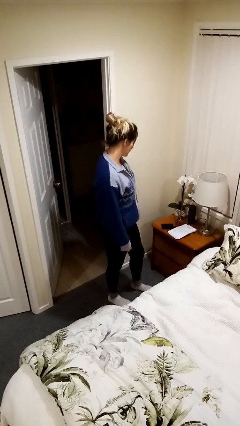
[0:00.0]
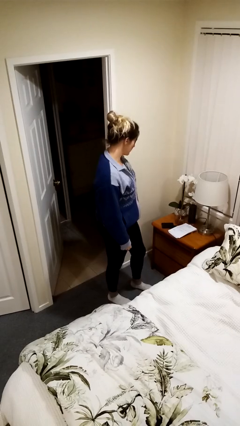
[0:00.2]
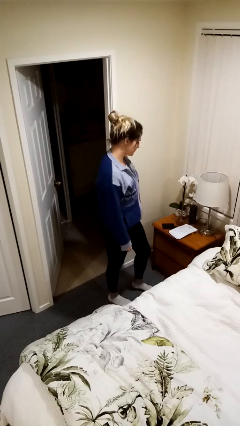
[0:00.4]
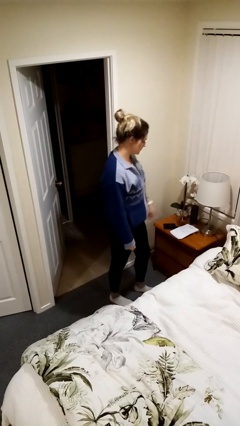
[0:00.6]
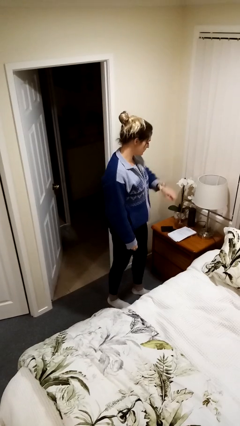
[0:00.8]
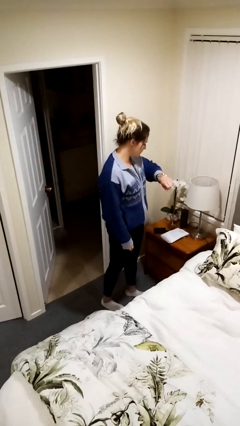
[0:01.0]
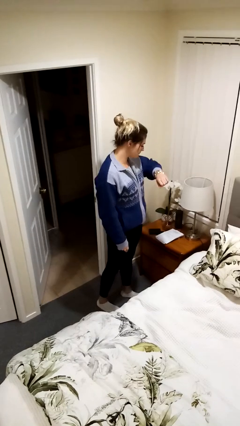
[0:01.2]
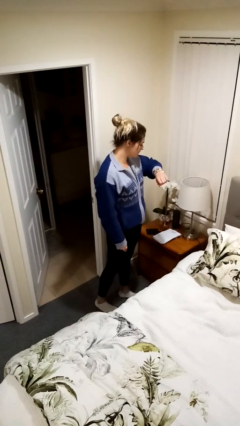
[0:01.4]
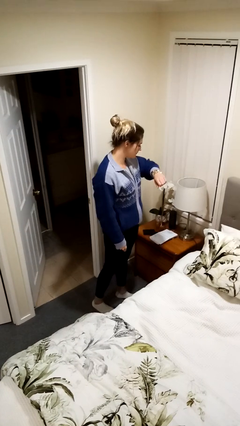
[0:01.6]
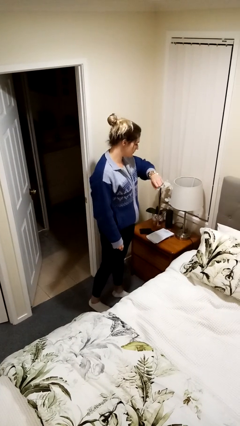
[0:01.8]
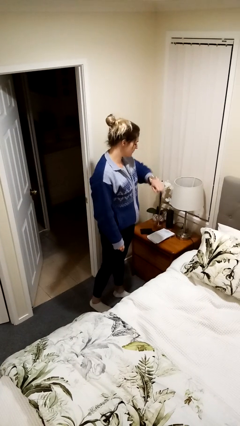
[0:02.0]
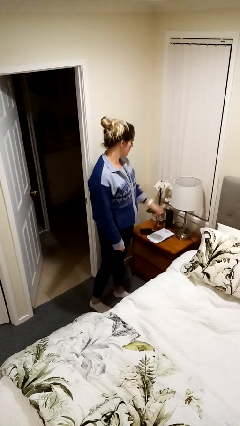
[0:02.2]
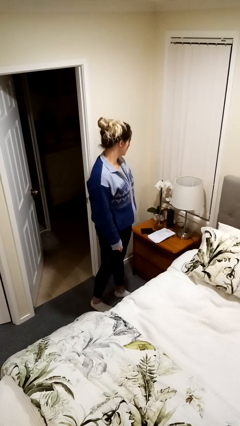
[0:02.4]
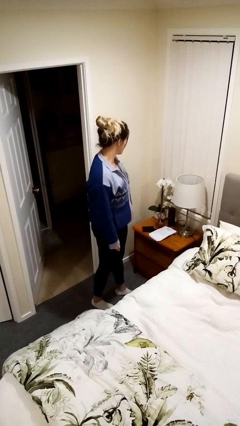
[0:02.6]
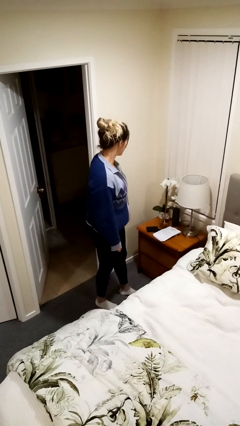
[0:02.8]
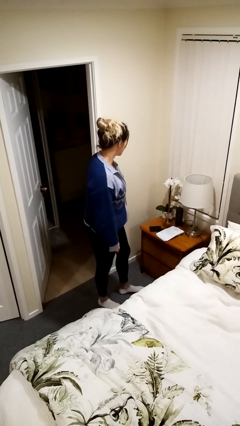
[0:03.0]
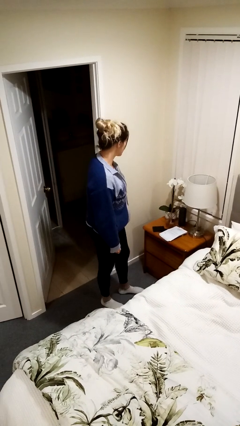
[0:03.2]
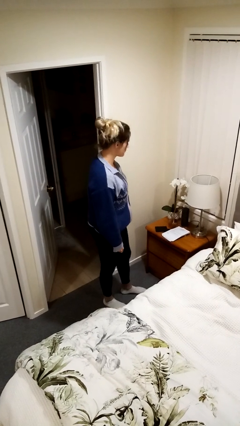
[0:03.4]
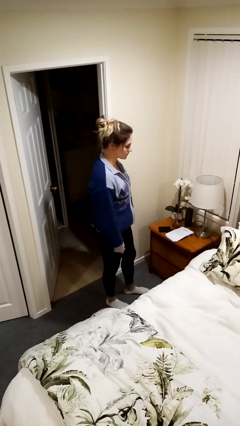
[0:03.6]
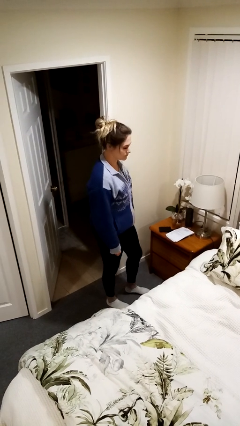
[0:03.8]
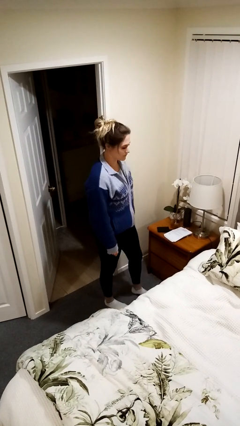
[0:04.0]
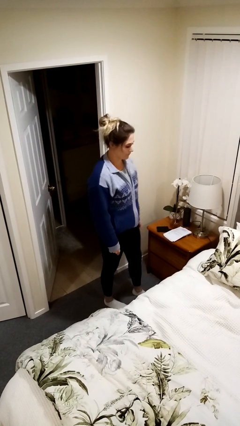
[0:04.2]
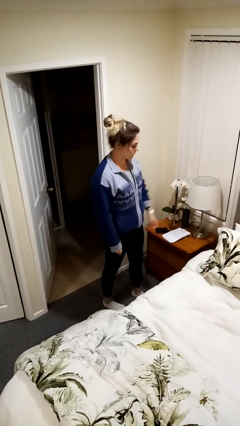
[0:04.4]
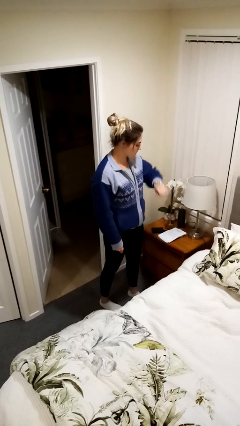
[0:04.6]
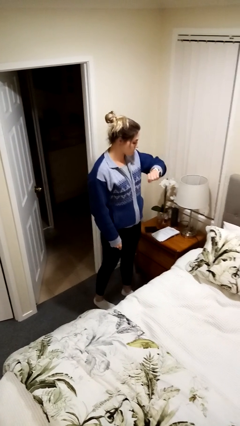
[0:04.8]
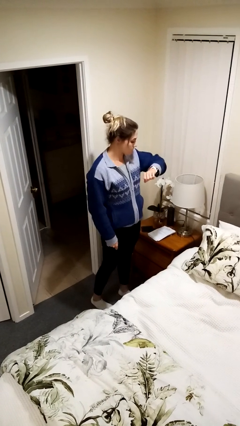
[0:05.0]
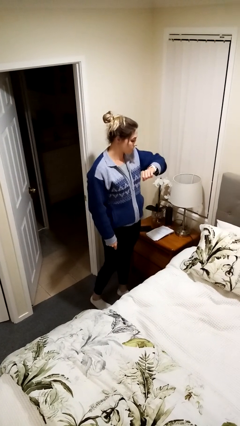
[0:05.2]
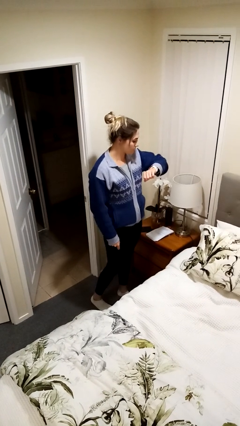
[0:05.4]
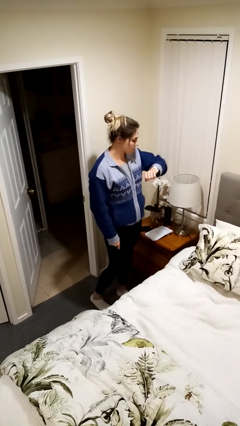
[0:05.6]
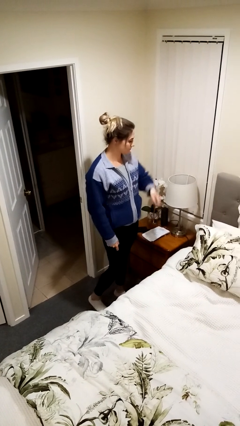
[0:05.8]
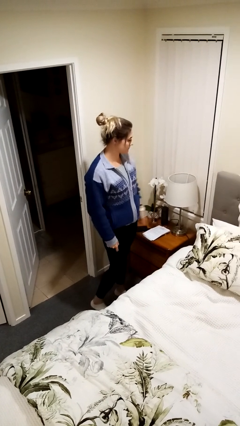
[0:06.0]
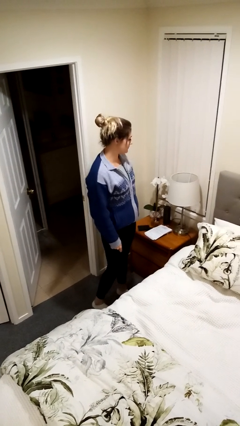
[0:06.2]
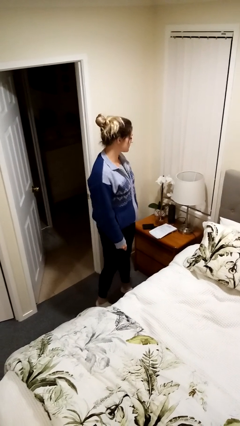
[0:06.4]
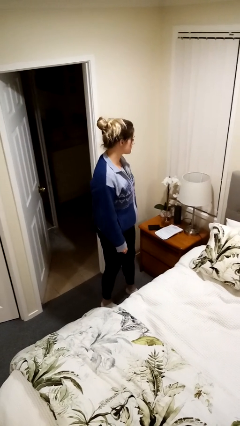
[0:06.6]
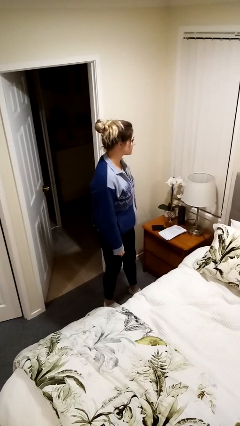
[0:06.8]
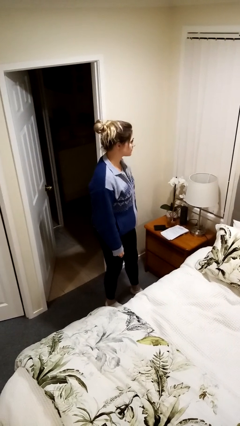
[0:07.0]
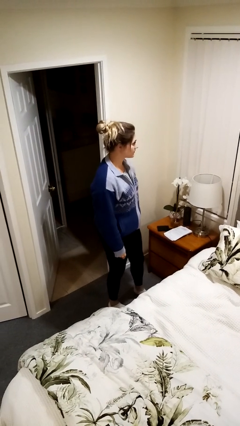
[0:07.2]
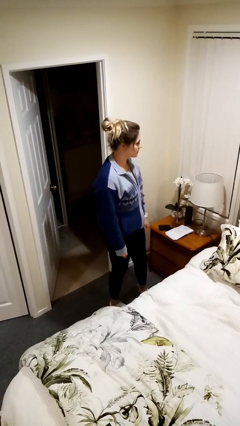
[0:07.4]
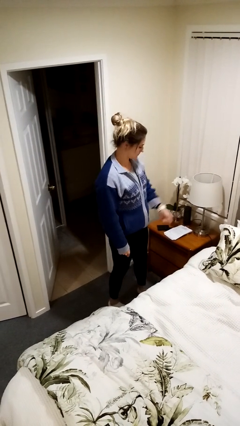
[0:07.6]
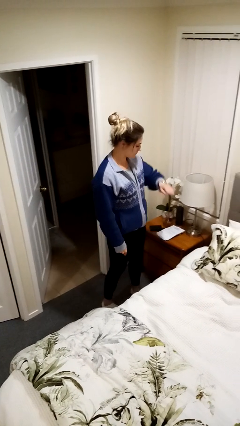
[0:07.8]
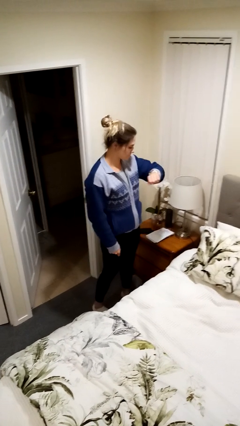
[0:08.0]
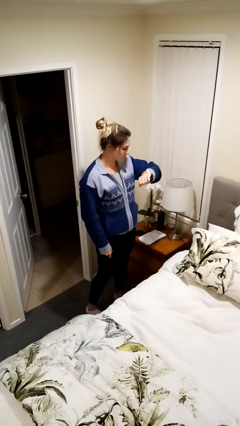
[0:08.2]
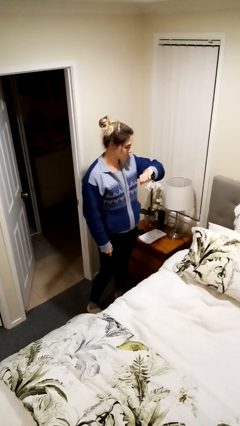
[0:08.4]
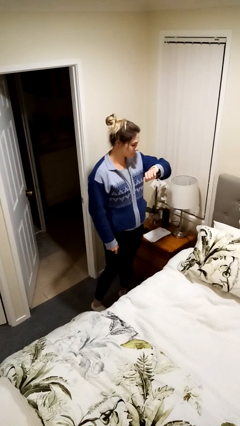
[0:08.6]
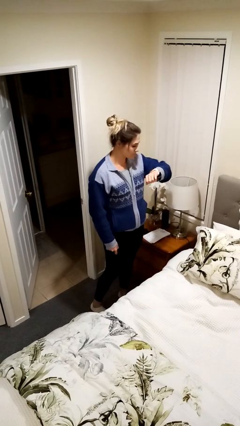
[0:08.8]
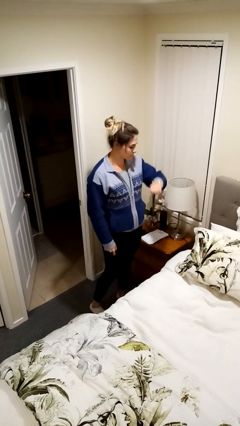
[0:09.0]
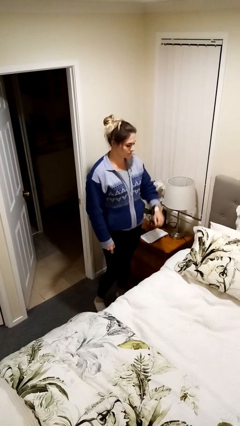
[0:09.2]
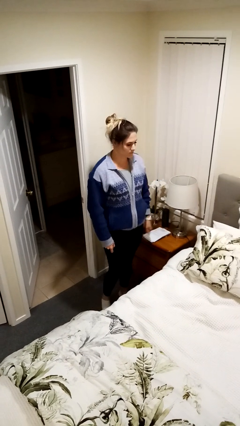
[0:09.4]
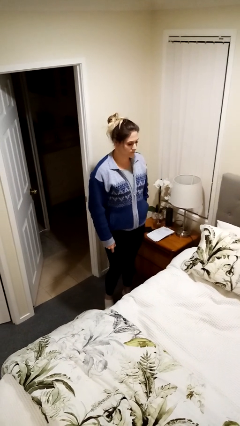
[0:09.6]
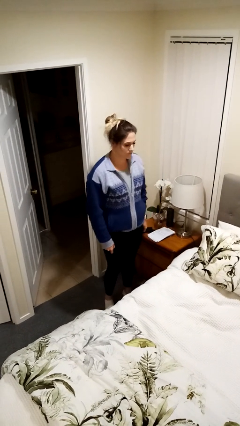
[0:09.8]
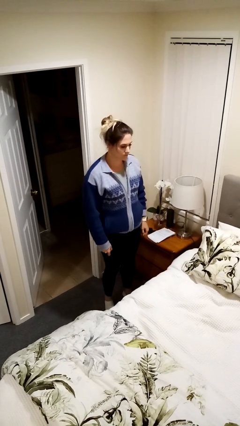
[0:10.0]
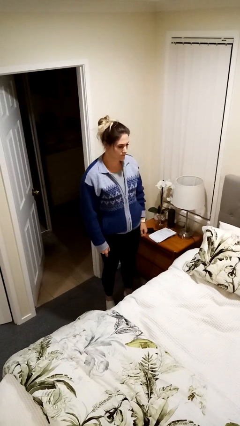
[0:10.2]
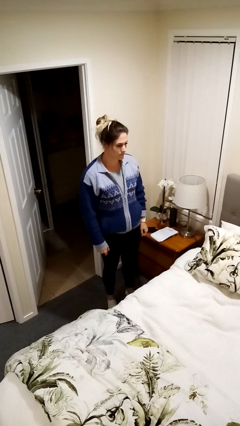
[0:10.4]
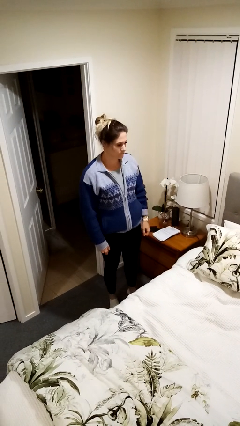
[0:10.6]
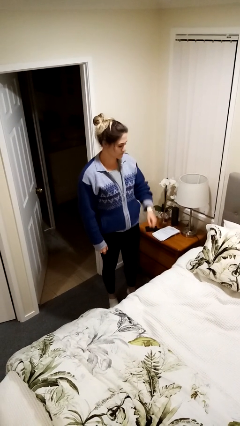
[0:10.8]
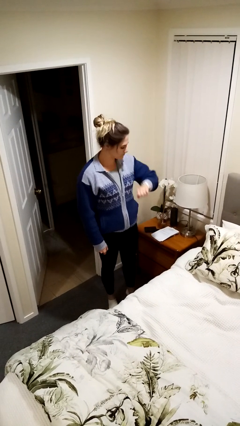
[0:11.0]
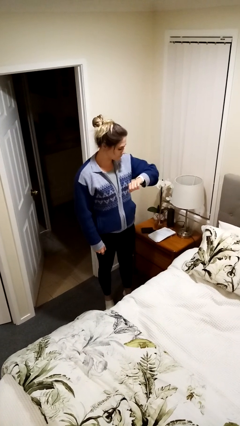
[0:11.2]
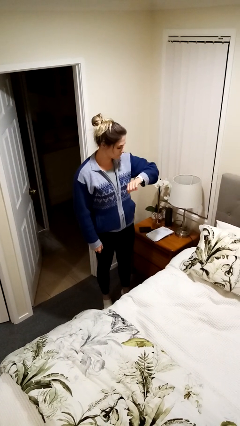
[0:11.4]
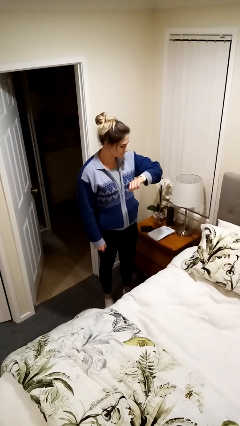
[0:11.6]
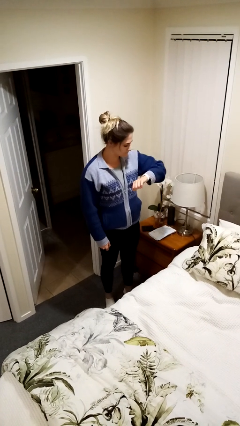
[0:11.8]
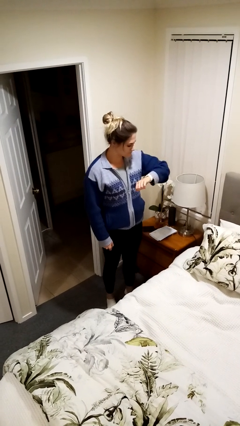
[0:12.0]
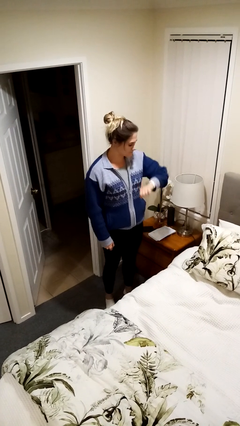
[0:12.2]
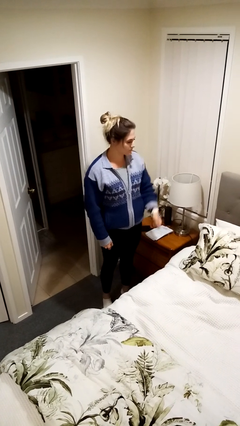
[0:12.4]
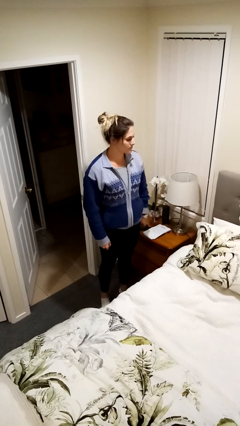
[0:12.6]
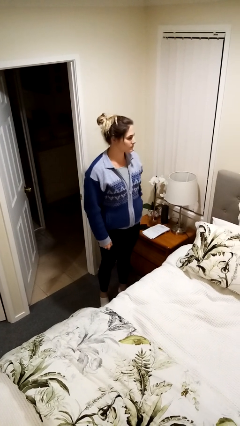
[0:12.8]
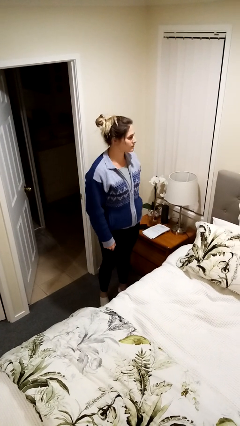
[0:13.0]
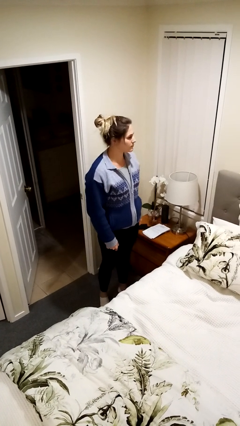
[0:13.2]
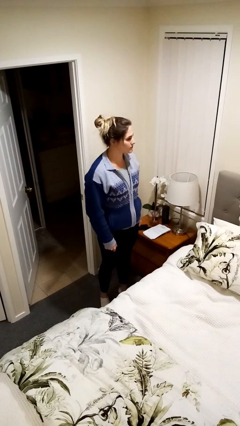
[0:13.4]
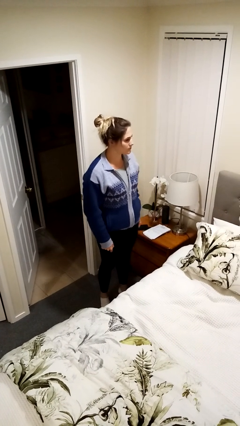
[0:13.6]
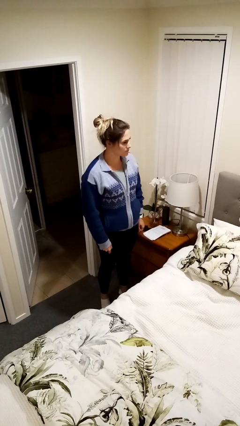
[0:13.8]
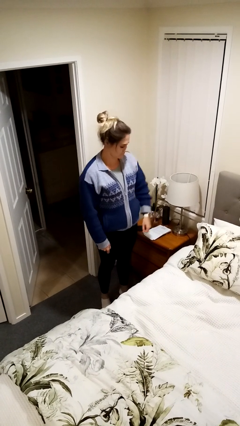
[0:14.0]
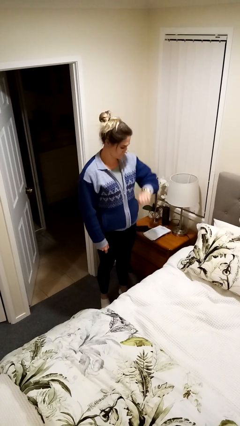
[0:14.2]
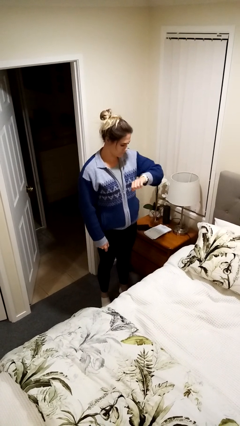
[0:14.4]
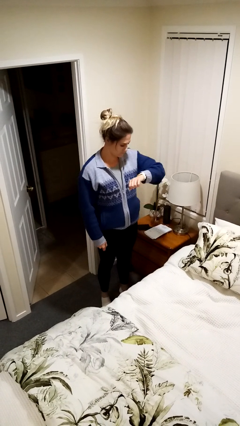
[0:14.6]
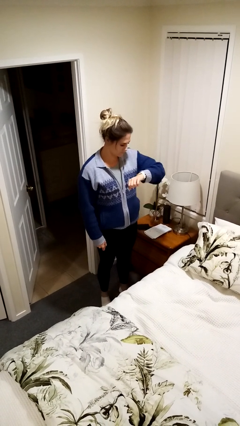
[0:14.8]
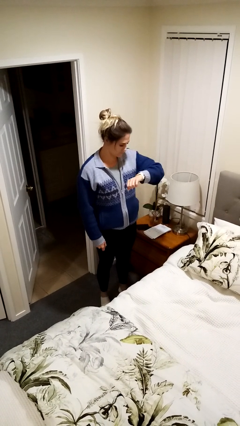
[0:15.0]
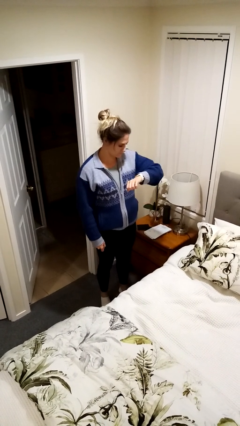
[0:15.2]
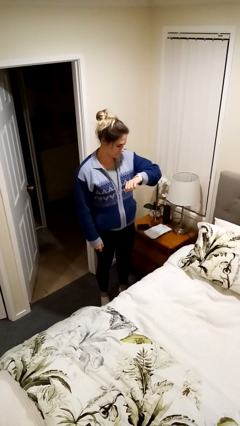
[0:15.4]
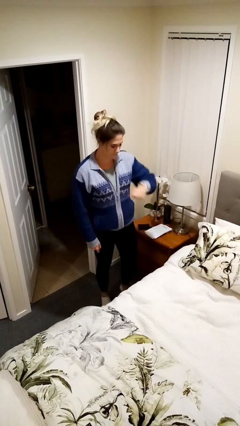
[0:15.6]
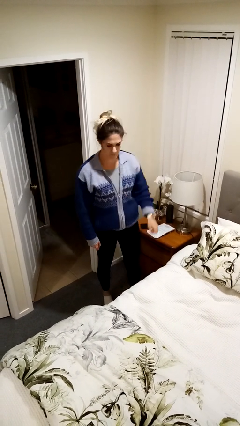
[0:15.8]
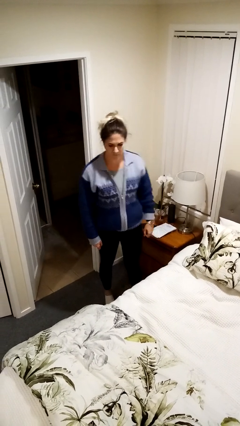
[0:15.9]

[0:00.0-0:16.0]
person looks at wristwatch

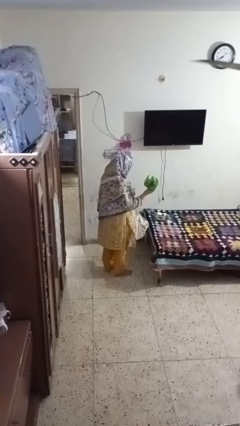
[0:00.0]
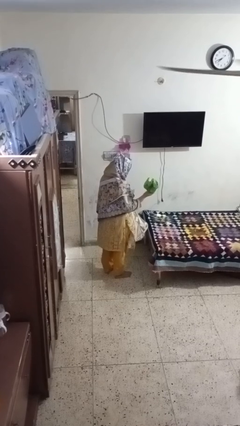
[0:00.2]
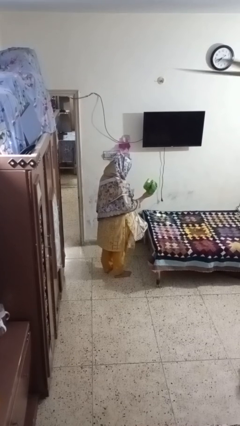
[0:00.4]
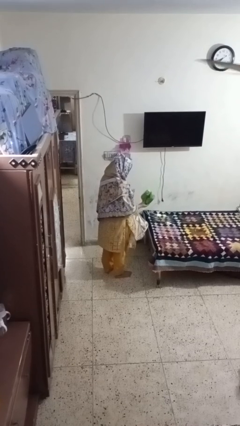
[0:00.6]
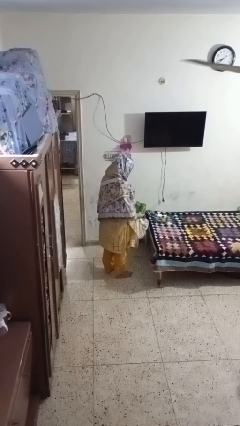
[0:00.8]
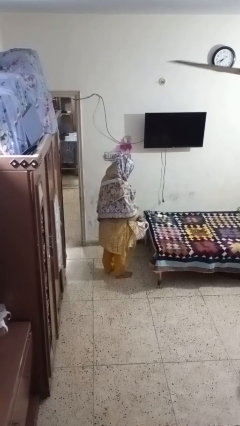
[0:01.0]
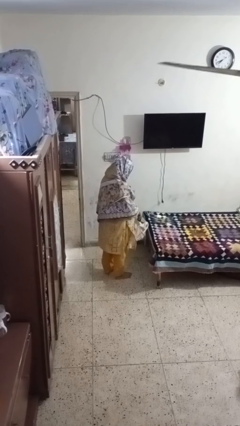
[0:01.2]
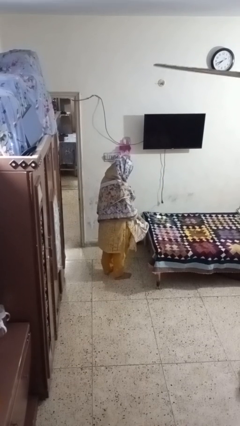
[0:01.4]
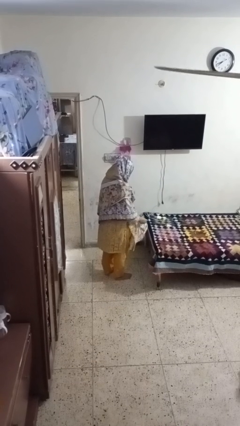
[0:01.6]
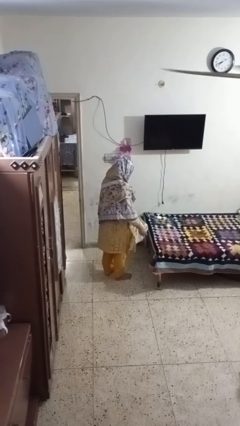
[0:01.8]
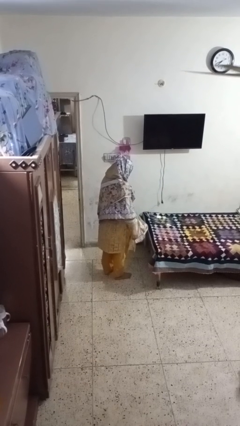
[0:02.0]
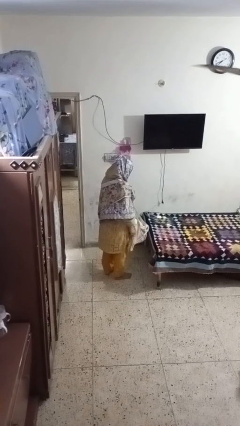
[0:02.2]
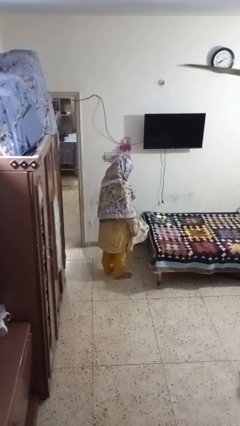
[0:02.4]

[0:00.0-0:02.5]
person puts object into bag
